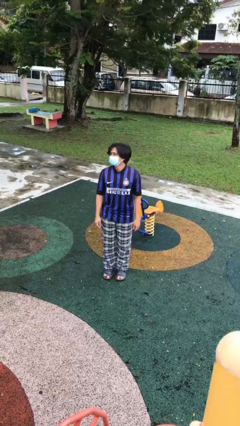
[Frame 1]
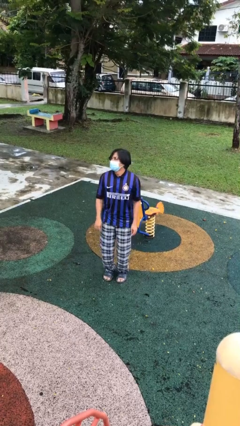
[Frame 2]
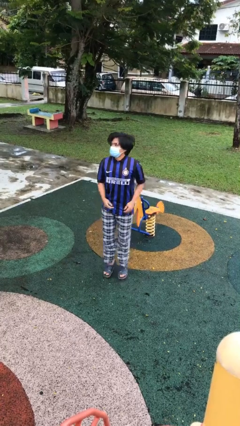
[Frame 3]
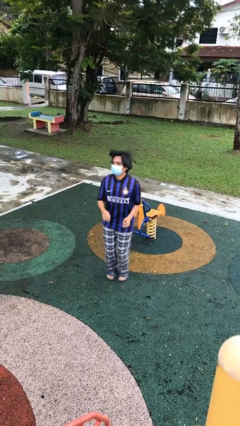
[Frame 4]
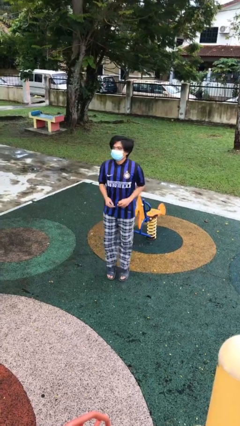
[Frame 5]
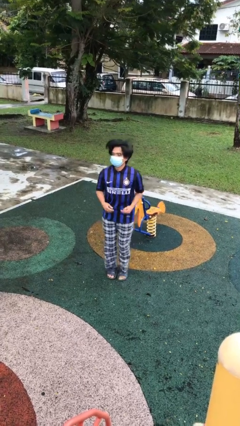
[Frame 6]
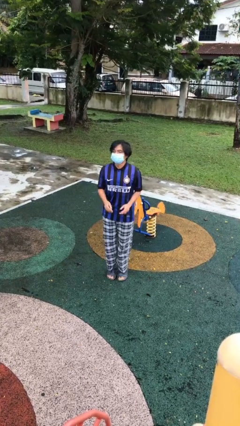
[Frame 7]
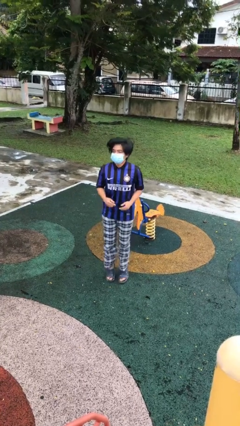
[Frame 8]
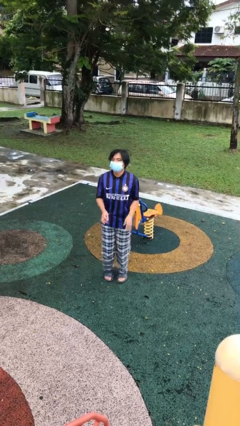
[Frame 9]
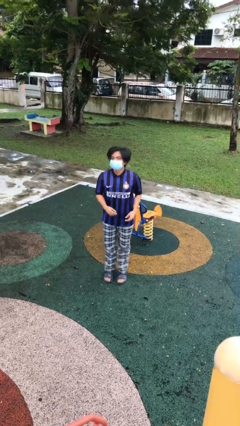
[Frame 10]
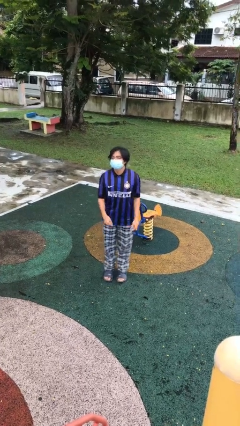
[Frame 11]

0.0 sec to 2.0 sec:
person jumps

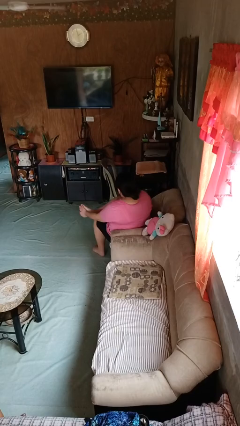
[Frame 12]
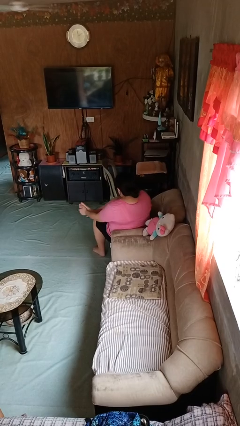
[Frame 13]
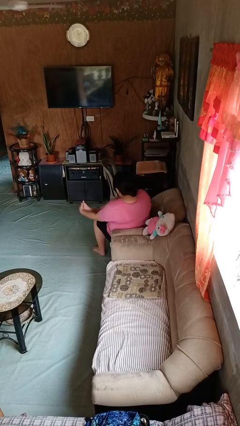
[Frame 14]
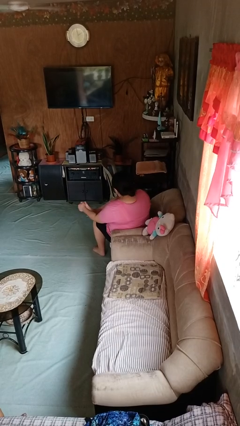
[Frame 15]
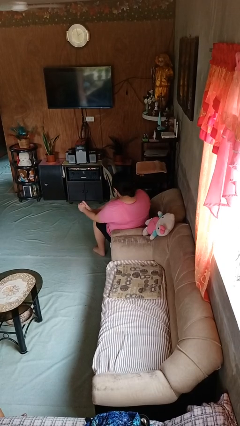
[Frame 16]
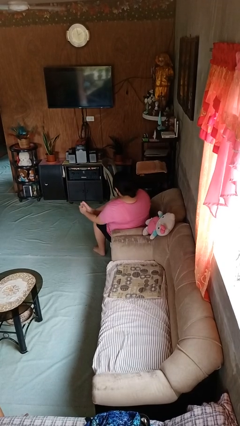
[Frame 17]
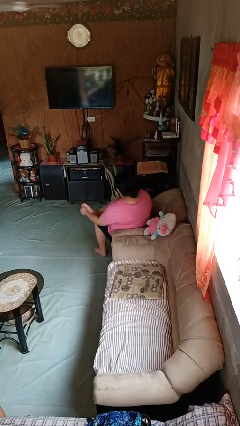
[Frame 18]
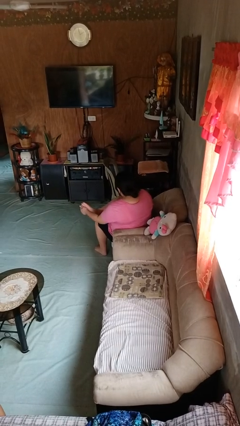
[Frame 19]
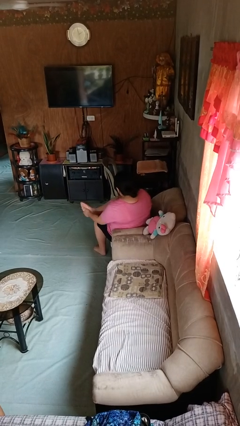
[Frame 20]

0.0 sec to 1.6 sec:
person rubs foot

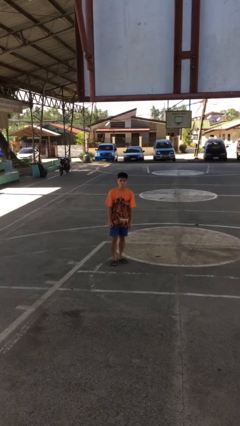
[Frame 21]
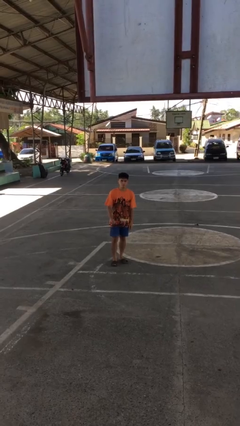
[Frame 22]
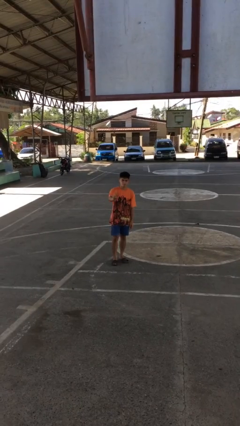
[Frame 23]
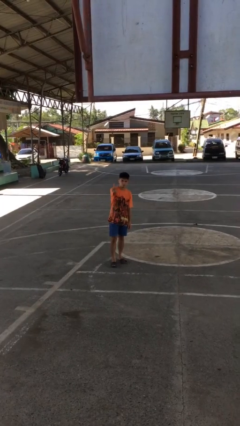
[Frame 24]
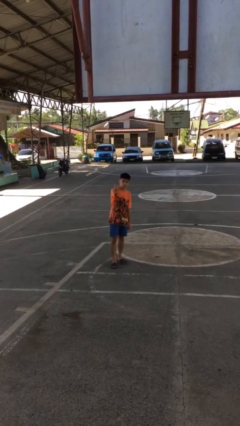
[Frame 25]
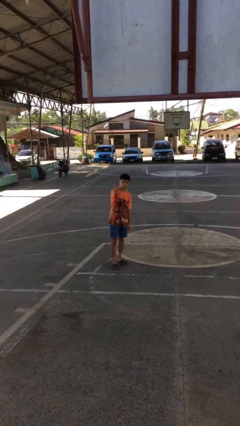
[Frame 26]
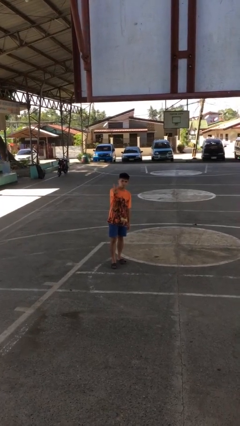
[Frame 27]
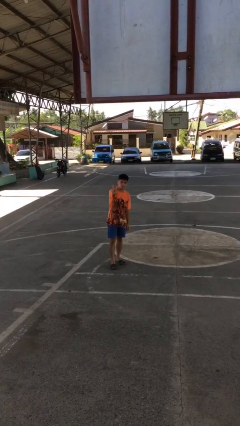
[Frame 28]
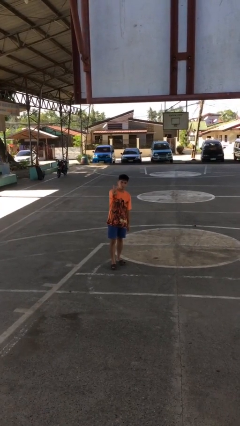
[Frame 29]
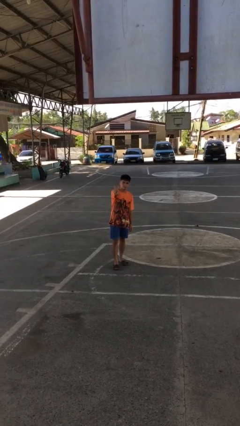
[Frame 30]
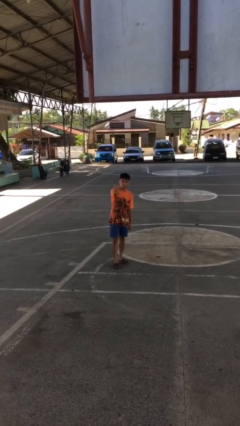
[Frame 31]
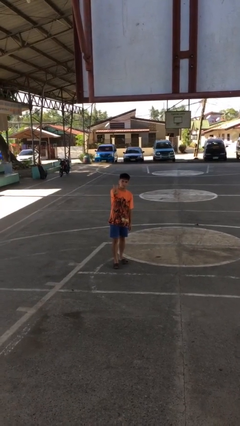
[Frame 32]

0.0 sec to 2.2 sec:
person gestures peace

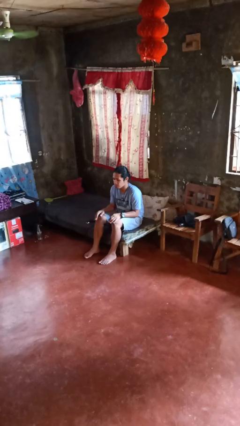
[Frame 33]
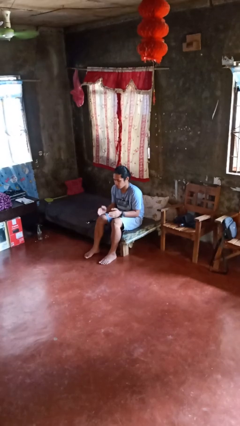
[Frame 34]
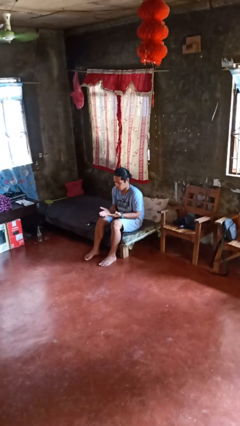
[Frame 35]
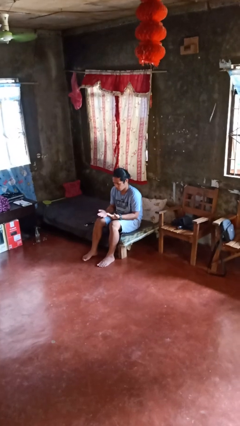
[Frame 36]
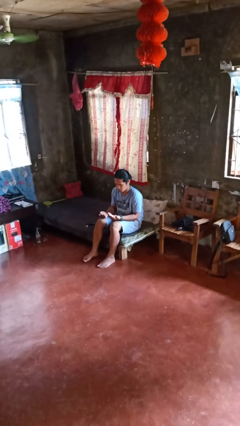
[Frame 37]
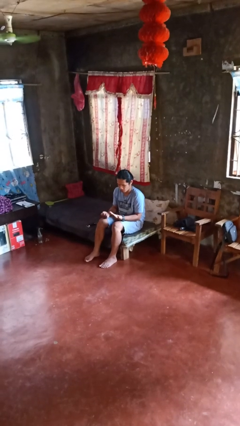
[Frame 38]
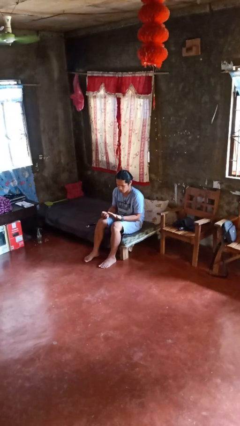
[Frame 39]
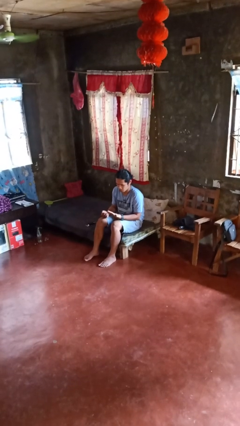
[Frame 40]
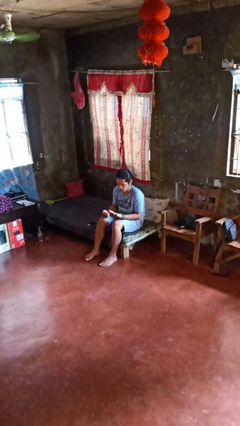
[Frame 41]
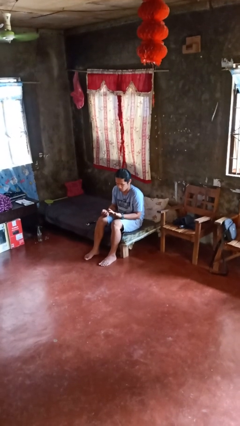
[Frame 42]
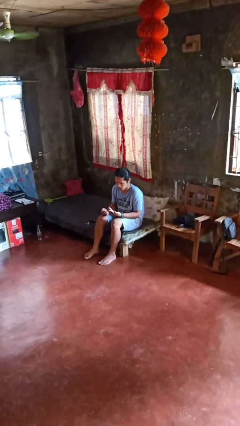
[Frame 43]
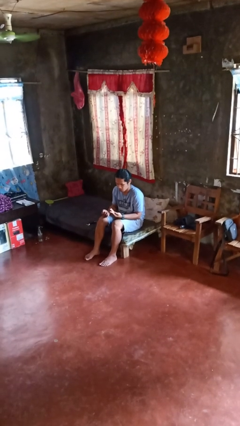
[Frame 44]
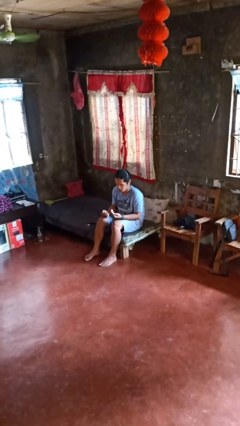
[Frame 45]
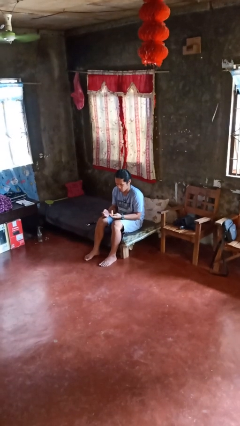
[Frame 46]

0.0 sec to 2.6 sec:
person looks at hands in lap

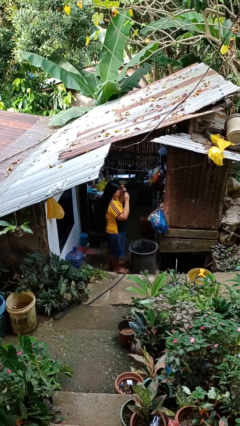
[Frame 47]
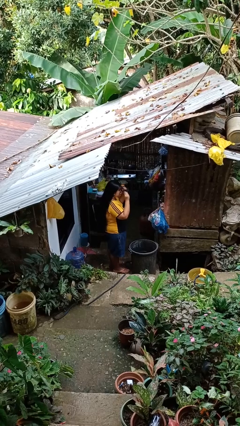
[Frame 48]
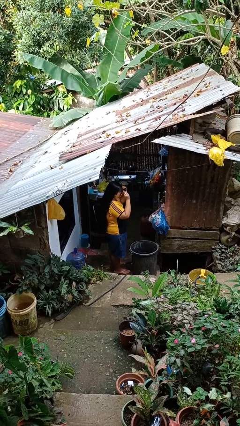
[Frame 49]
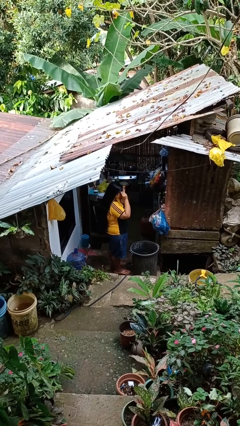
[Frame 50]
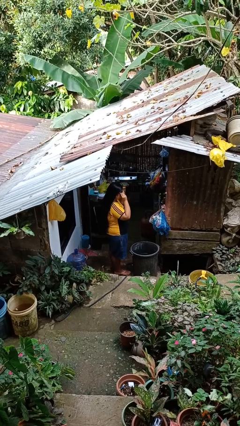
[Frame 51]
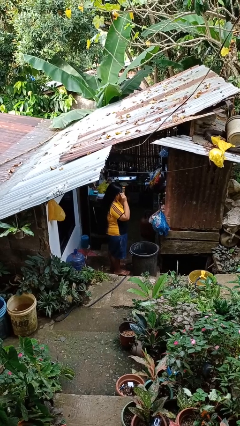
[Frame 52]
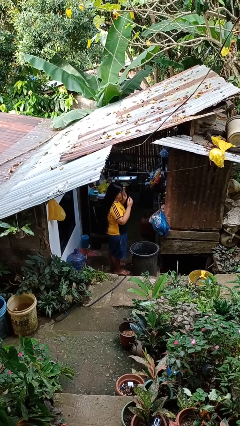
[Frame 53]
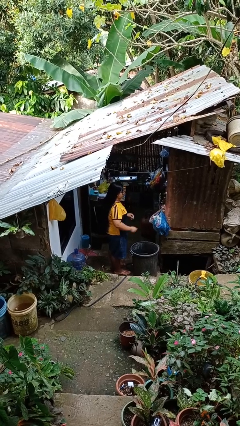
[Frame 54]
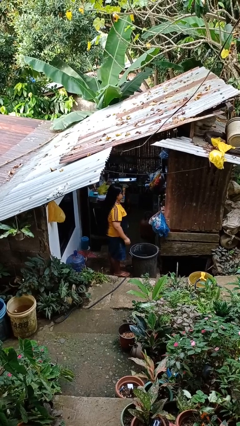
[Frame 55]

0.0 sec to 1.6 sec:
person puts on sunglasses

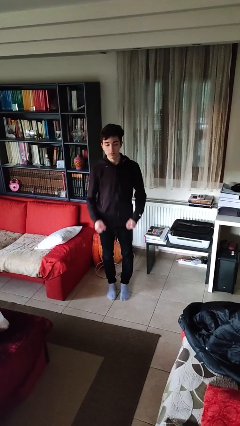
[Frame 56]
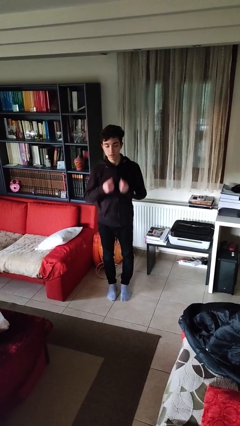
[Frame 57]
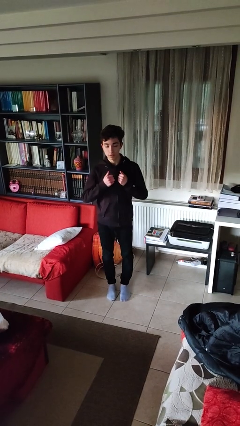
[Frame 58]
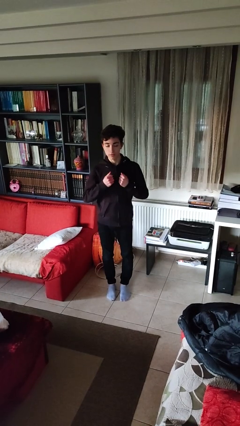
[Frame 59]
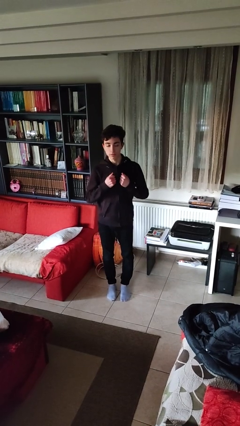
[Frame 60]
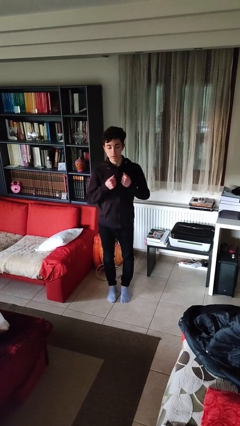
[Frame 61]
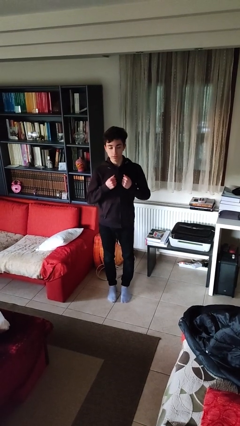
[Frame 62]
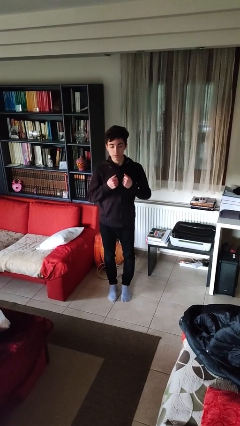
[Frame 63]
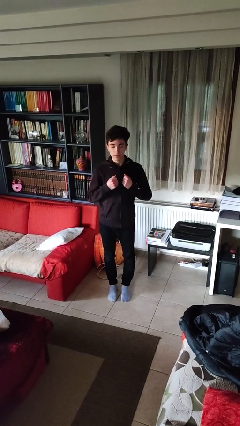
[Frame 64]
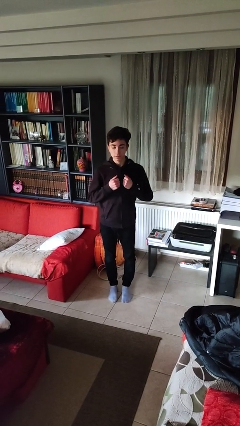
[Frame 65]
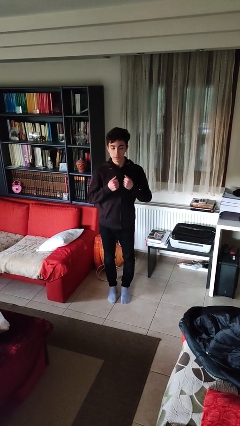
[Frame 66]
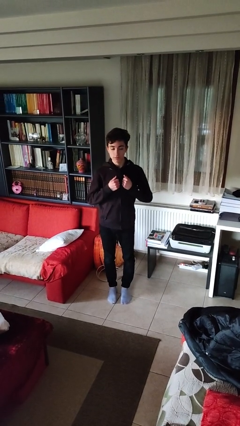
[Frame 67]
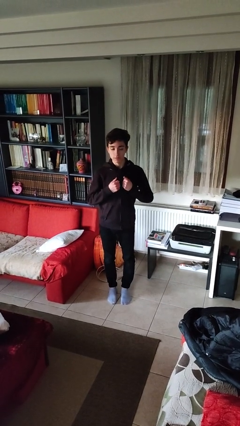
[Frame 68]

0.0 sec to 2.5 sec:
person drums on chest

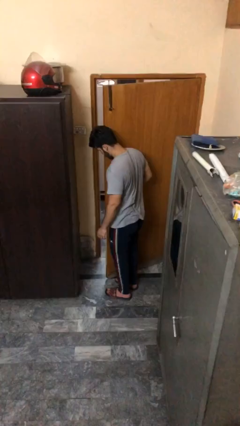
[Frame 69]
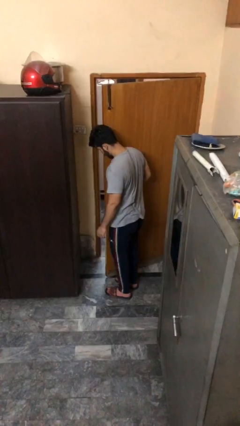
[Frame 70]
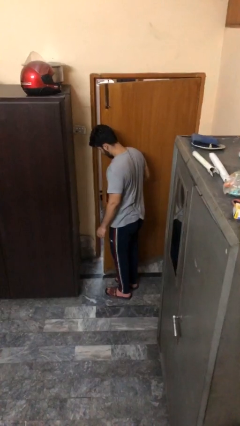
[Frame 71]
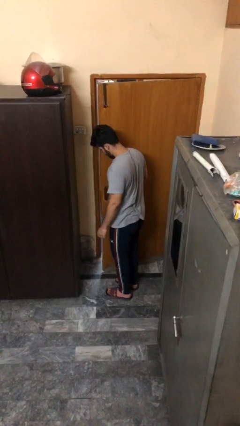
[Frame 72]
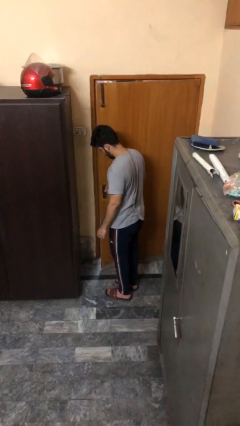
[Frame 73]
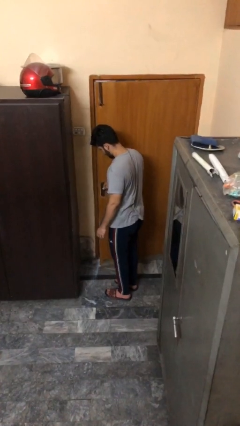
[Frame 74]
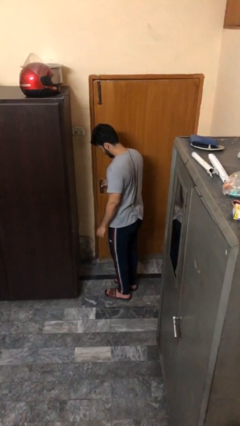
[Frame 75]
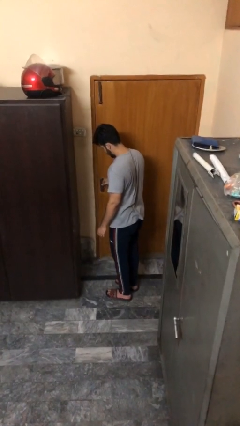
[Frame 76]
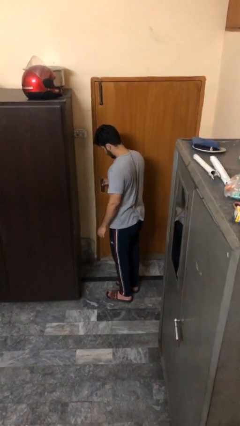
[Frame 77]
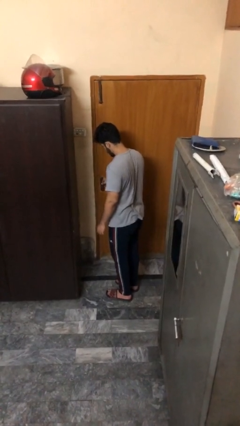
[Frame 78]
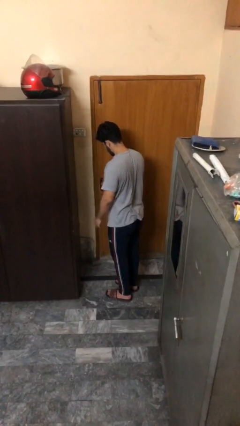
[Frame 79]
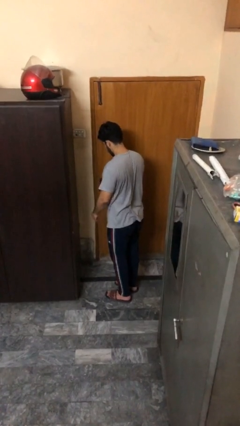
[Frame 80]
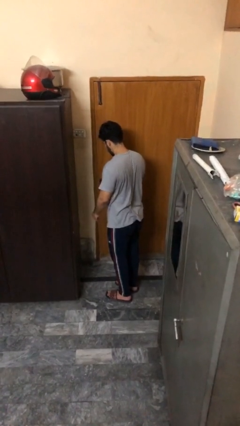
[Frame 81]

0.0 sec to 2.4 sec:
person closes facility door

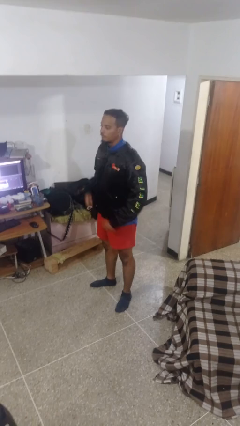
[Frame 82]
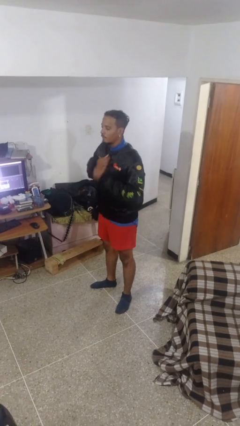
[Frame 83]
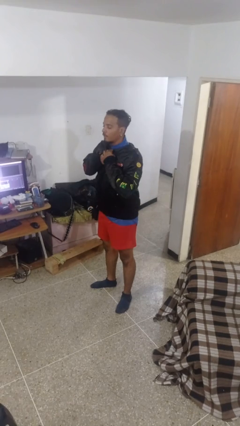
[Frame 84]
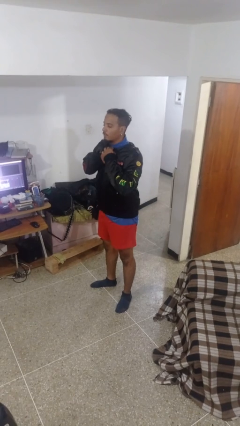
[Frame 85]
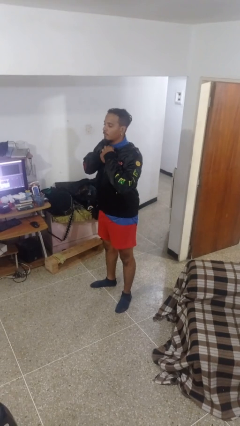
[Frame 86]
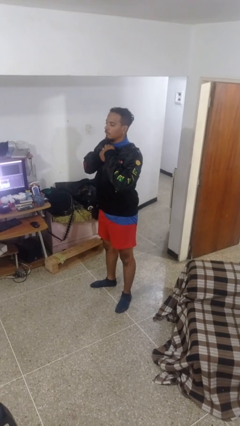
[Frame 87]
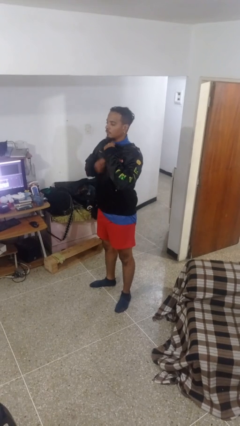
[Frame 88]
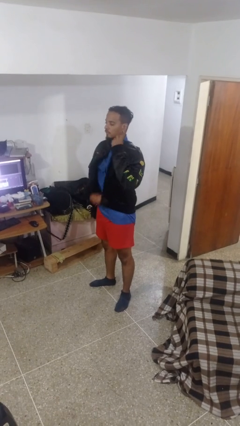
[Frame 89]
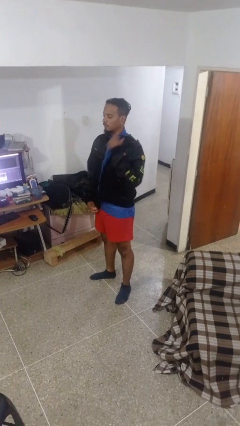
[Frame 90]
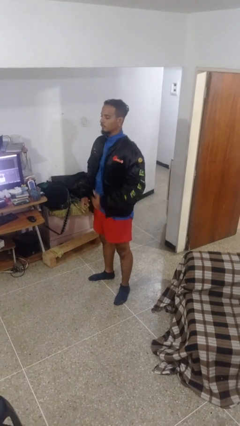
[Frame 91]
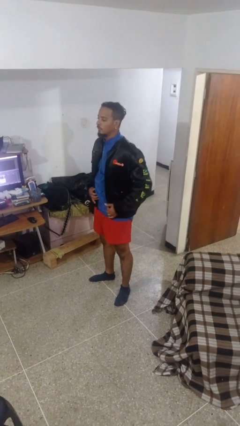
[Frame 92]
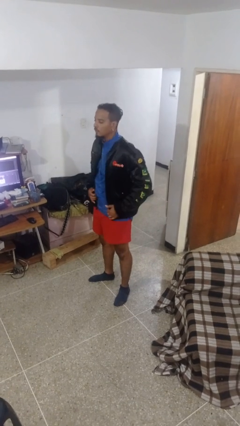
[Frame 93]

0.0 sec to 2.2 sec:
person unzips jacket
